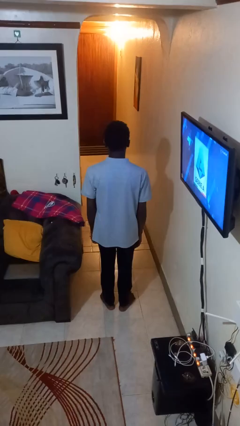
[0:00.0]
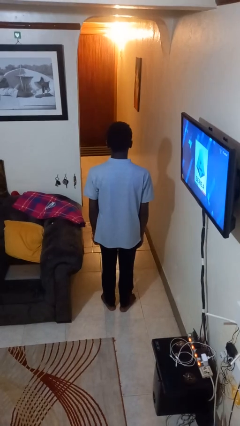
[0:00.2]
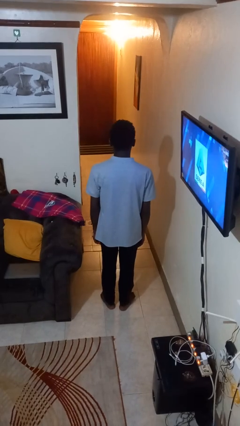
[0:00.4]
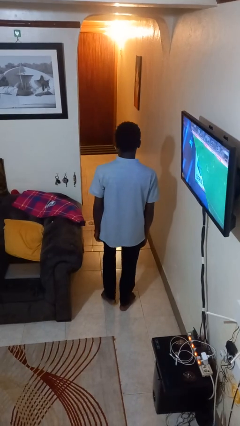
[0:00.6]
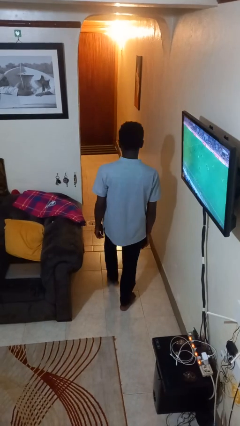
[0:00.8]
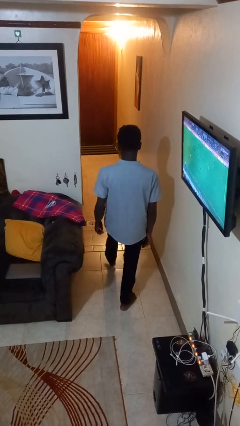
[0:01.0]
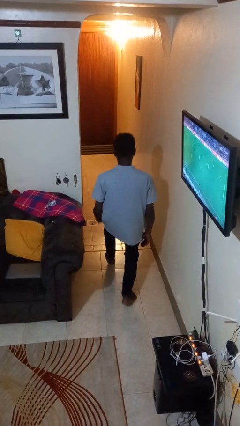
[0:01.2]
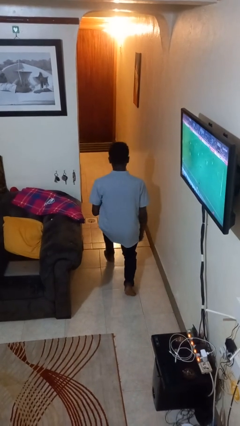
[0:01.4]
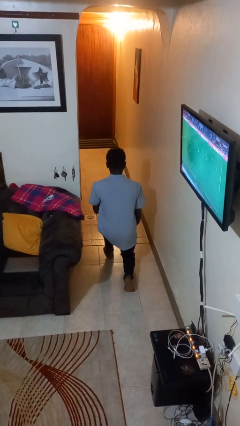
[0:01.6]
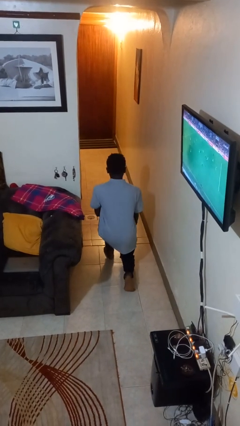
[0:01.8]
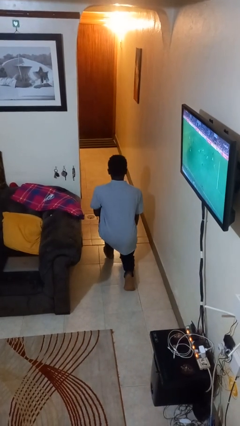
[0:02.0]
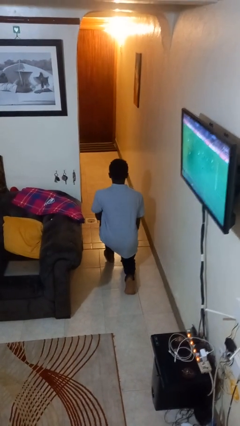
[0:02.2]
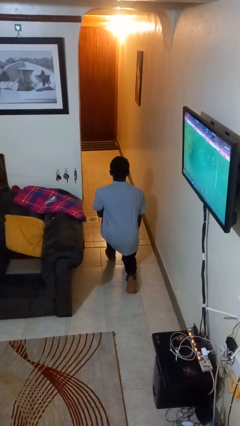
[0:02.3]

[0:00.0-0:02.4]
person exercises with lunges

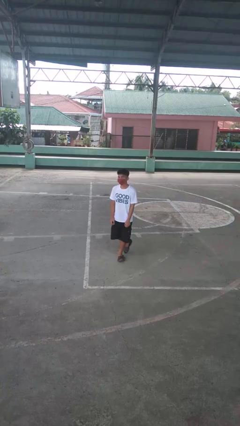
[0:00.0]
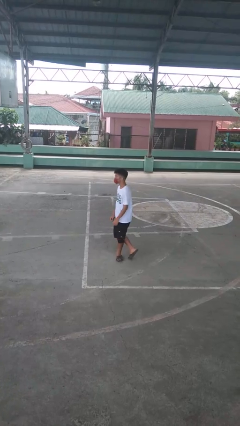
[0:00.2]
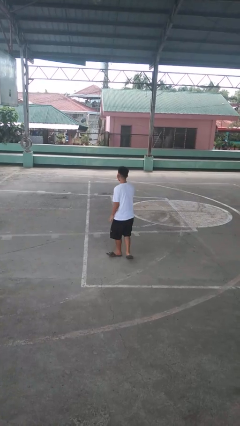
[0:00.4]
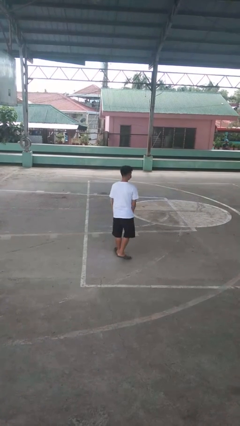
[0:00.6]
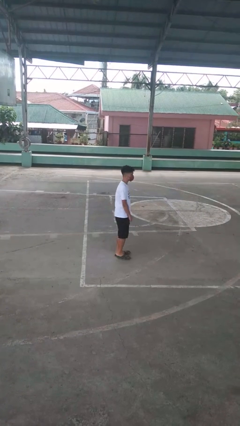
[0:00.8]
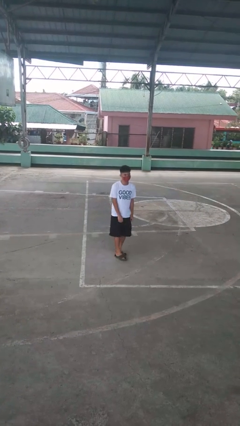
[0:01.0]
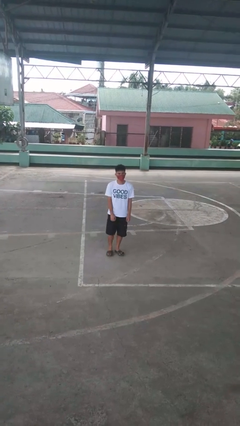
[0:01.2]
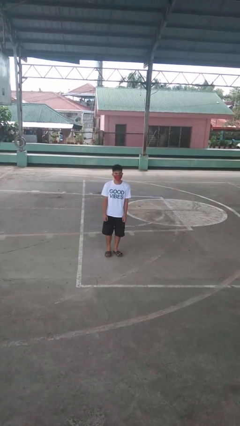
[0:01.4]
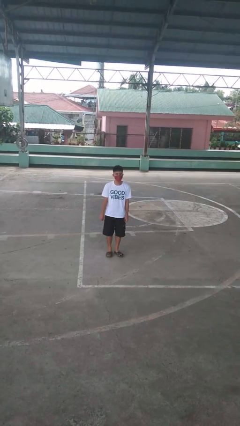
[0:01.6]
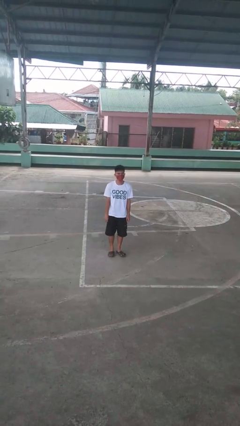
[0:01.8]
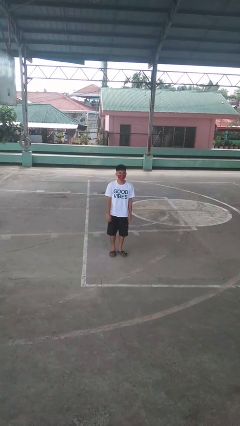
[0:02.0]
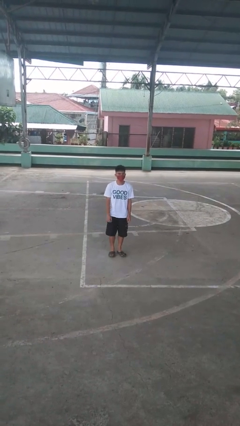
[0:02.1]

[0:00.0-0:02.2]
person twirls

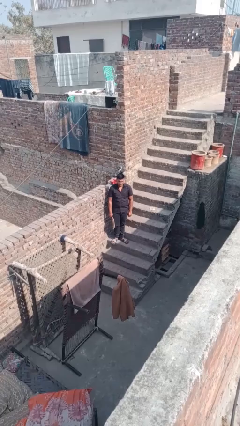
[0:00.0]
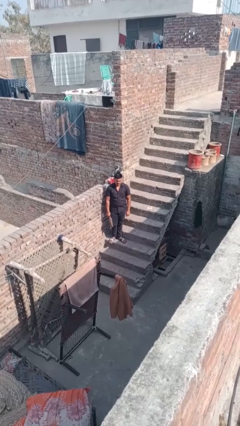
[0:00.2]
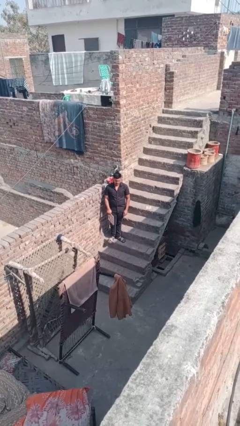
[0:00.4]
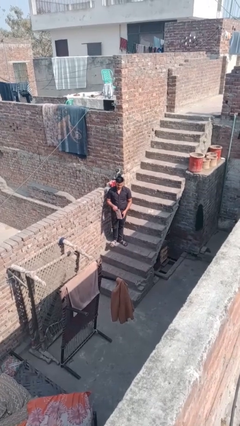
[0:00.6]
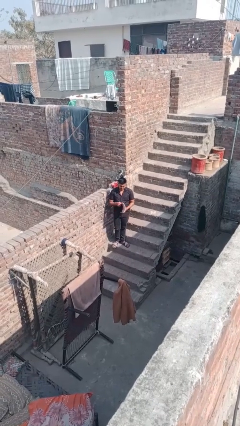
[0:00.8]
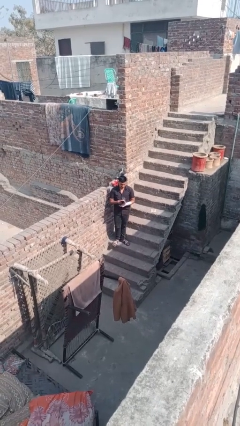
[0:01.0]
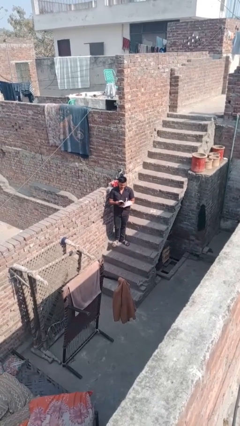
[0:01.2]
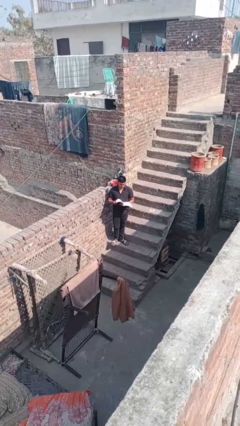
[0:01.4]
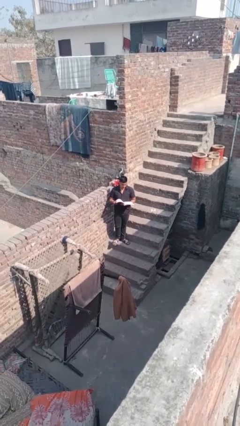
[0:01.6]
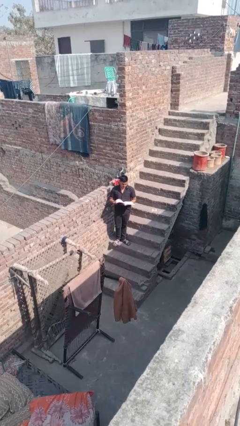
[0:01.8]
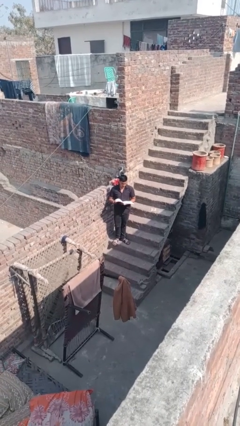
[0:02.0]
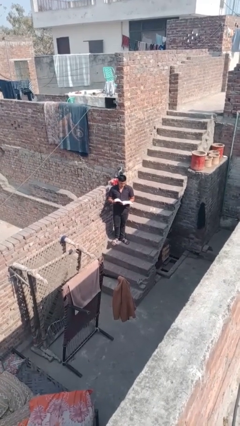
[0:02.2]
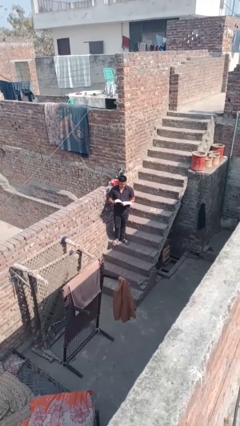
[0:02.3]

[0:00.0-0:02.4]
person reads document

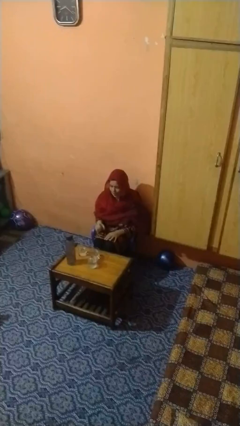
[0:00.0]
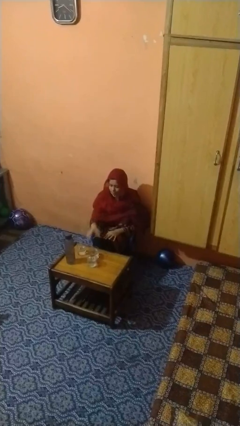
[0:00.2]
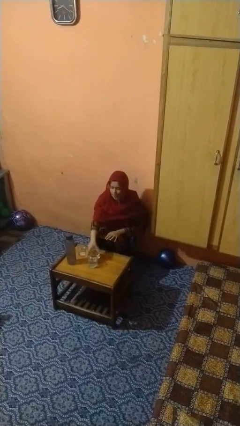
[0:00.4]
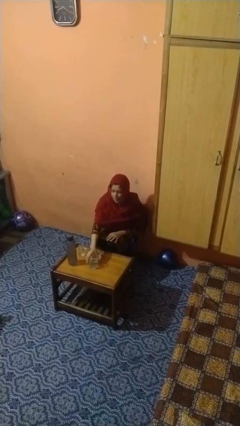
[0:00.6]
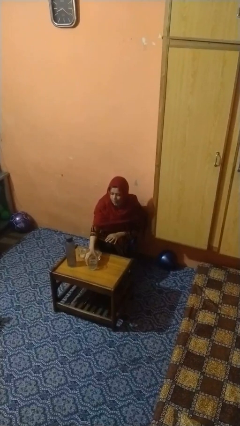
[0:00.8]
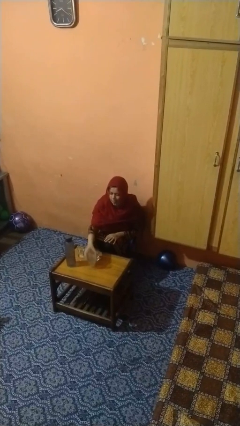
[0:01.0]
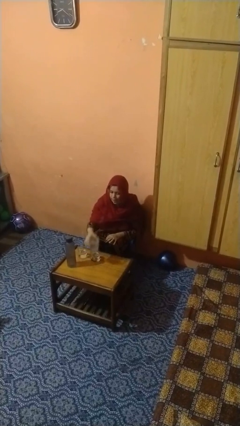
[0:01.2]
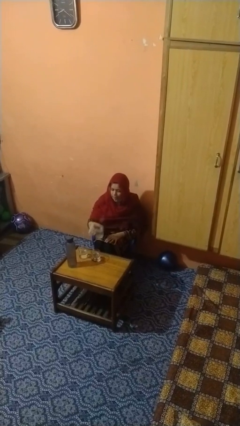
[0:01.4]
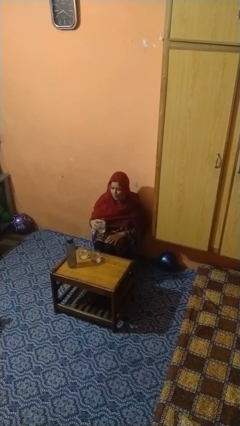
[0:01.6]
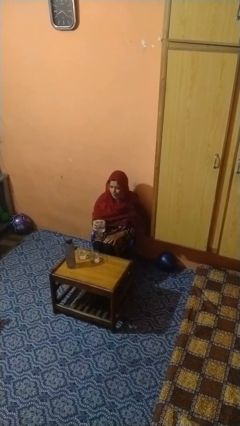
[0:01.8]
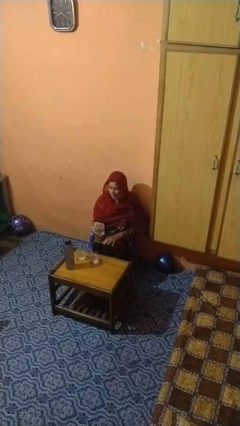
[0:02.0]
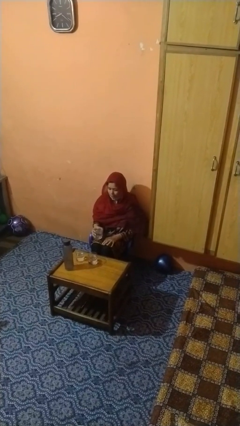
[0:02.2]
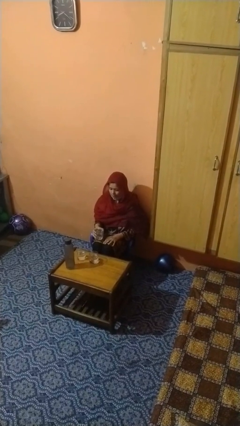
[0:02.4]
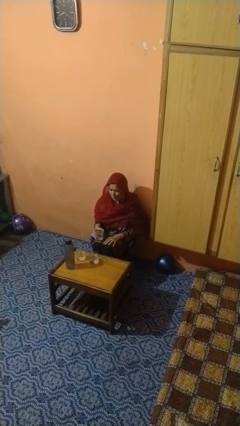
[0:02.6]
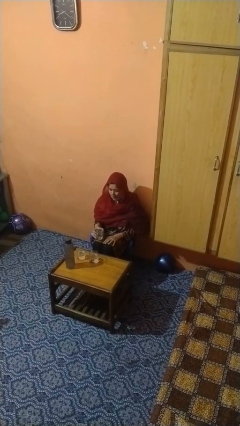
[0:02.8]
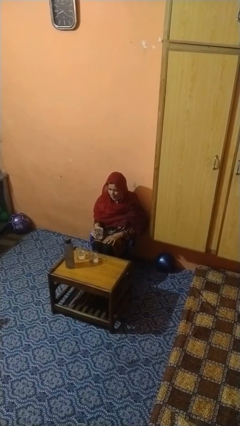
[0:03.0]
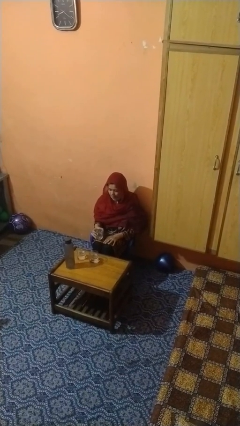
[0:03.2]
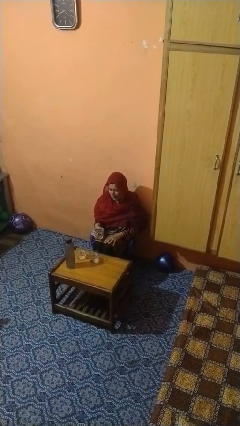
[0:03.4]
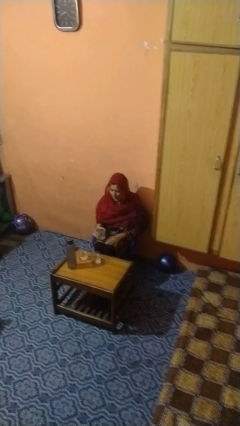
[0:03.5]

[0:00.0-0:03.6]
person picks up object from table

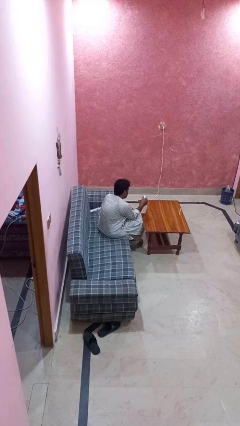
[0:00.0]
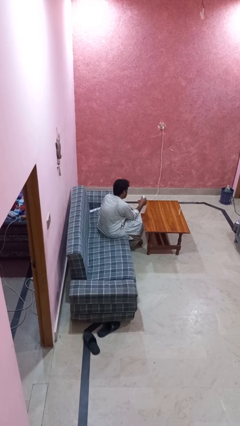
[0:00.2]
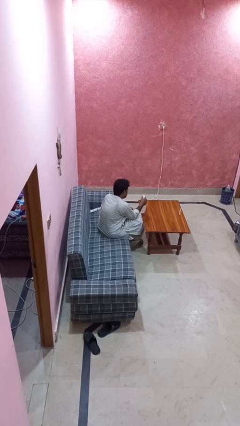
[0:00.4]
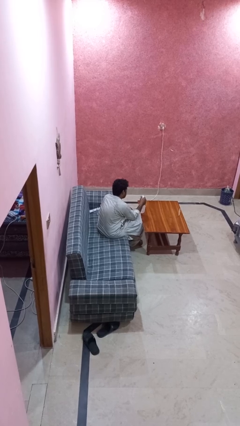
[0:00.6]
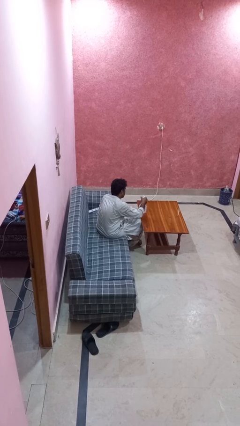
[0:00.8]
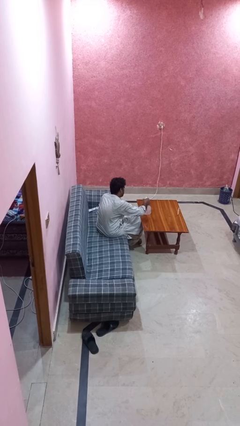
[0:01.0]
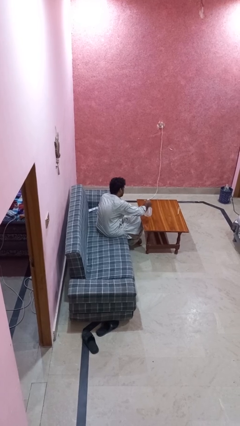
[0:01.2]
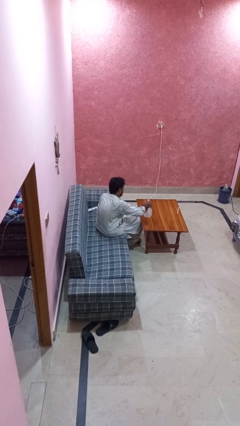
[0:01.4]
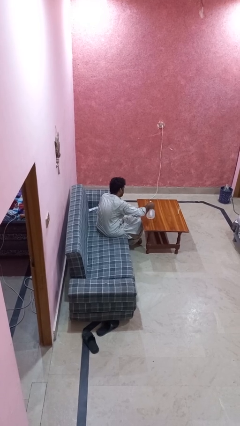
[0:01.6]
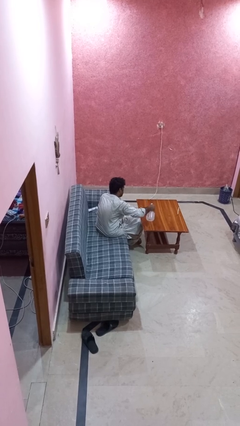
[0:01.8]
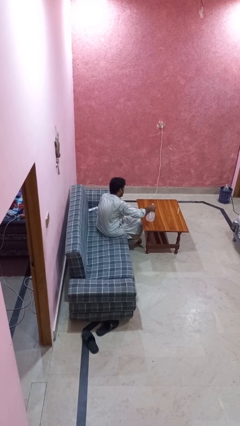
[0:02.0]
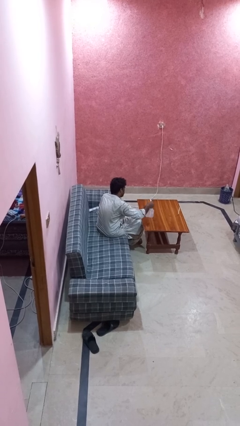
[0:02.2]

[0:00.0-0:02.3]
person sprays from bottle

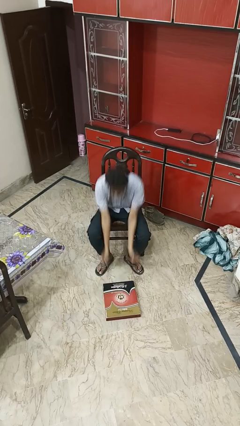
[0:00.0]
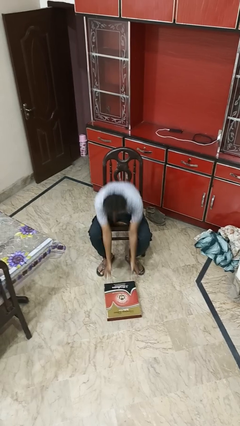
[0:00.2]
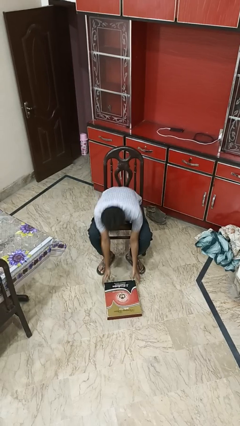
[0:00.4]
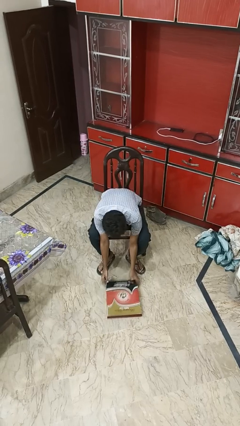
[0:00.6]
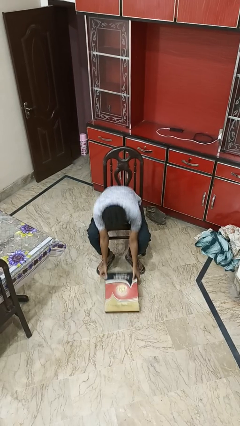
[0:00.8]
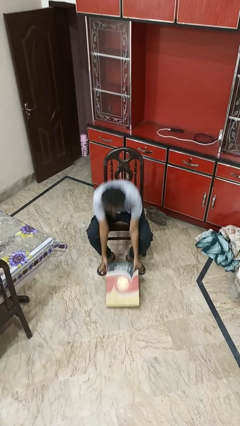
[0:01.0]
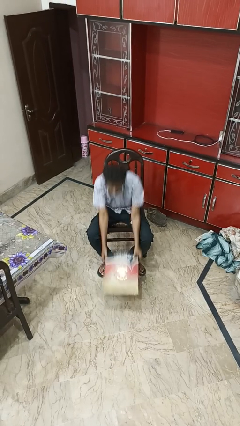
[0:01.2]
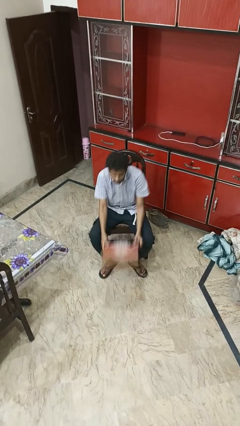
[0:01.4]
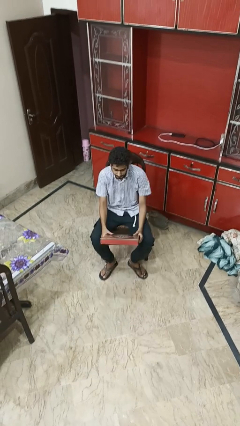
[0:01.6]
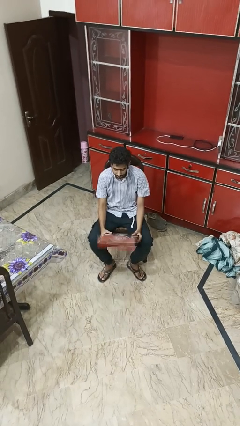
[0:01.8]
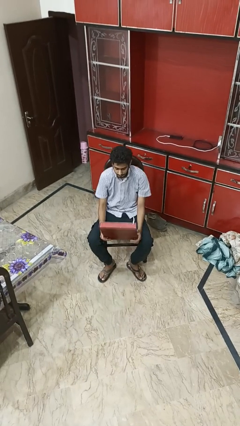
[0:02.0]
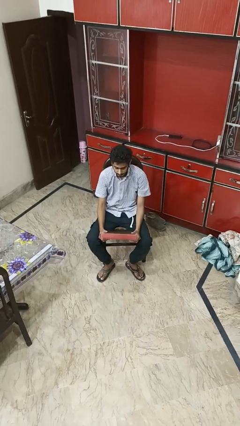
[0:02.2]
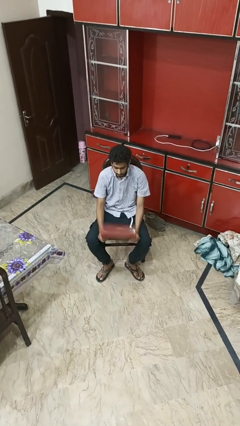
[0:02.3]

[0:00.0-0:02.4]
person picks up object from floor

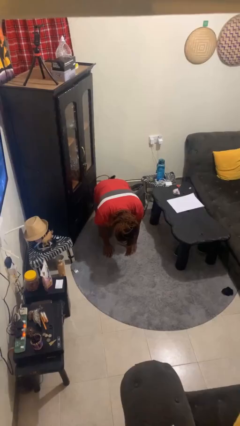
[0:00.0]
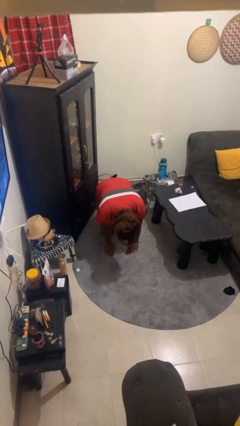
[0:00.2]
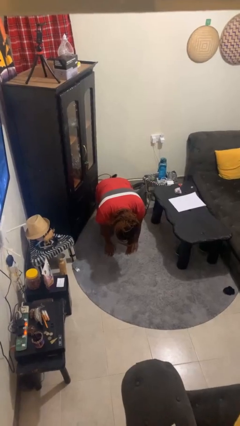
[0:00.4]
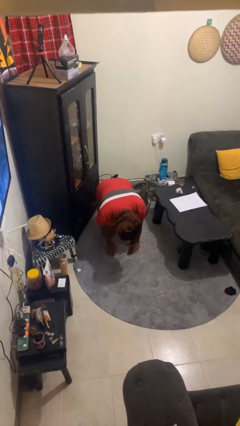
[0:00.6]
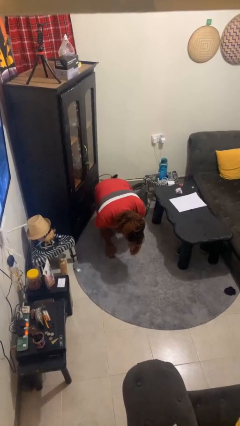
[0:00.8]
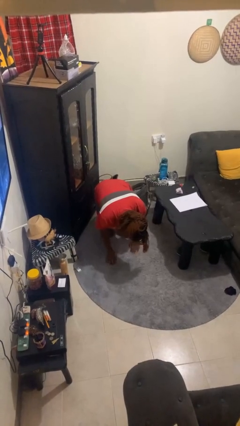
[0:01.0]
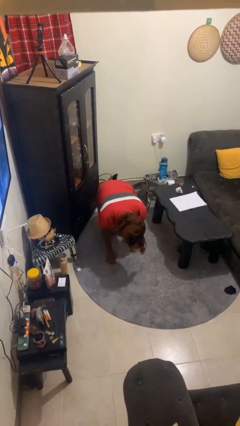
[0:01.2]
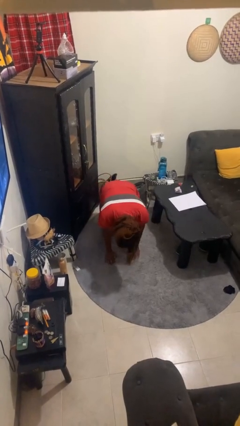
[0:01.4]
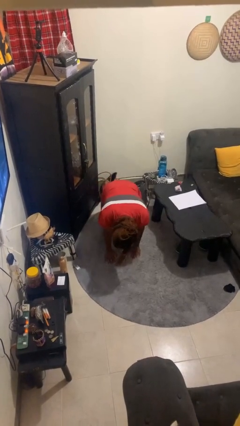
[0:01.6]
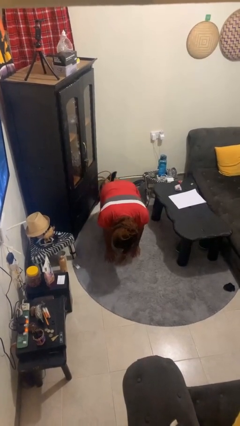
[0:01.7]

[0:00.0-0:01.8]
person crawls
